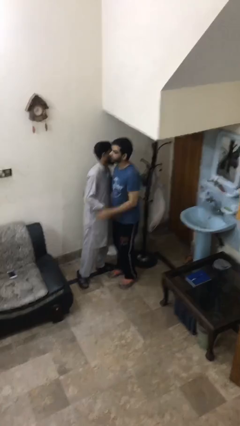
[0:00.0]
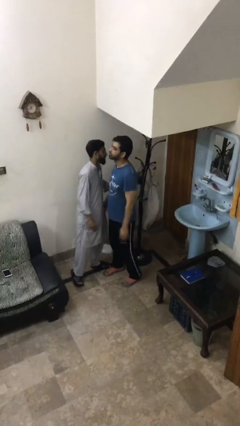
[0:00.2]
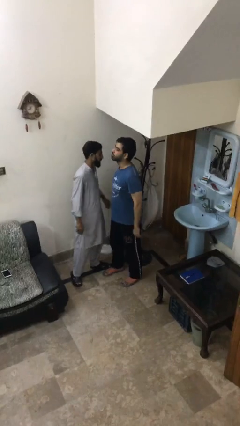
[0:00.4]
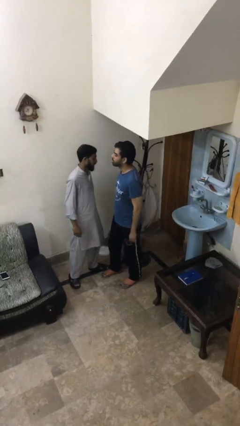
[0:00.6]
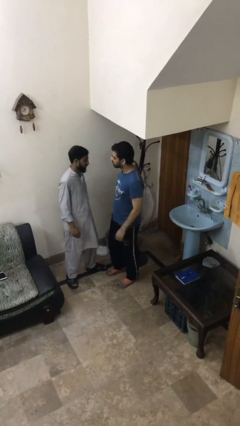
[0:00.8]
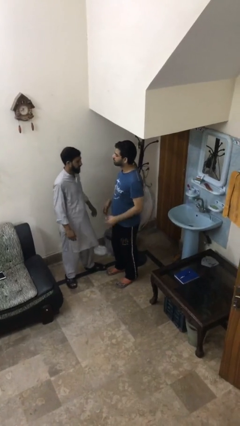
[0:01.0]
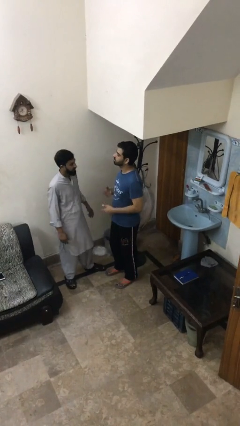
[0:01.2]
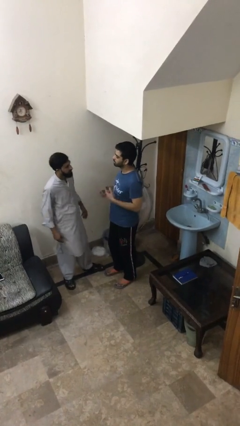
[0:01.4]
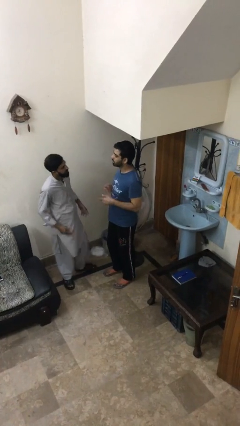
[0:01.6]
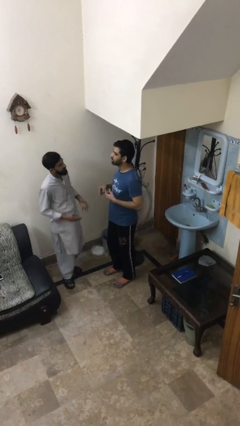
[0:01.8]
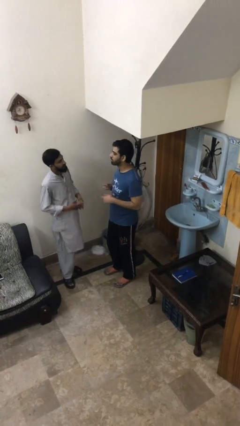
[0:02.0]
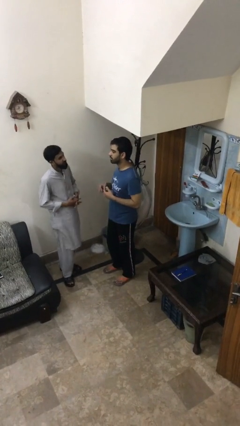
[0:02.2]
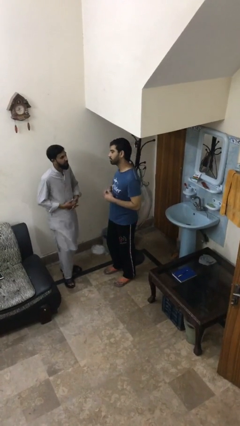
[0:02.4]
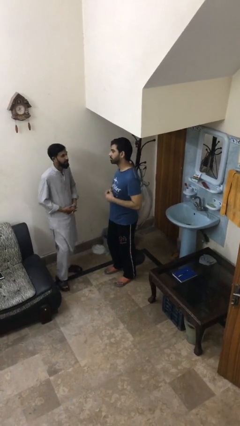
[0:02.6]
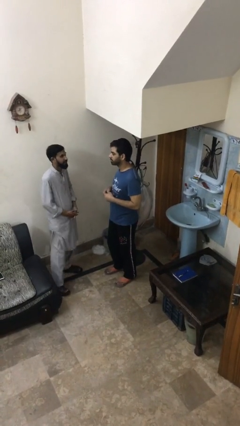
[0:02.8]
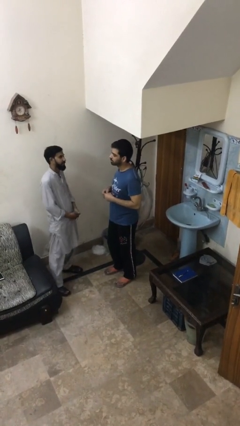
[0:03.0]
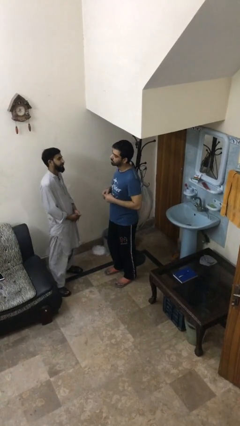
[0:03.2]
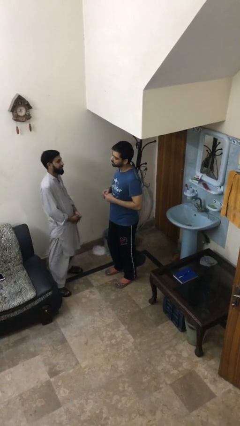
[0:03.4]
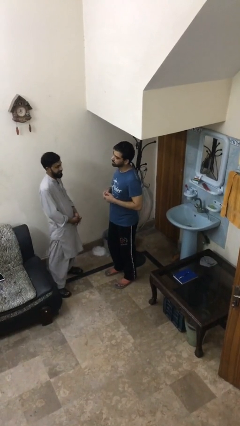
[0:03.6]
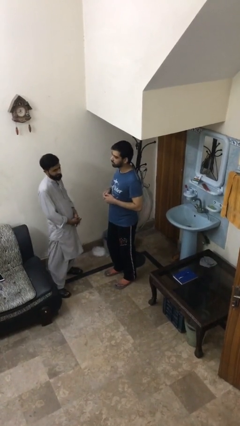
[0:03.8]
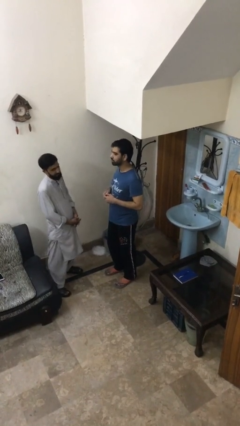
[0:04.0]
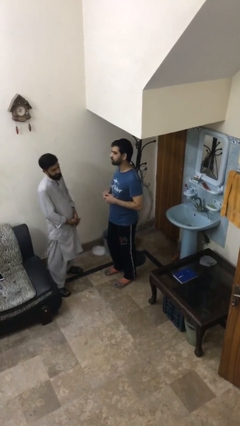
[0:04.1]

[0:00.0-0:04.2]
person talks to person

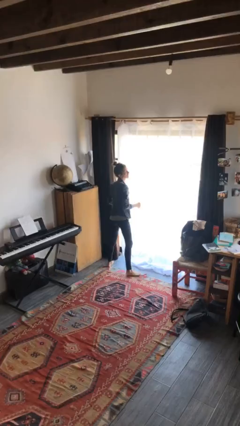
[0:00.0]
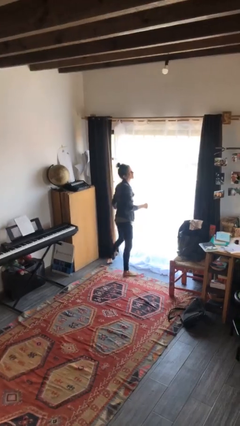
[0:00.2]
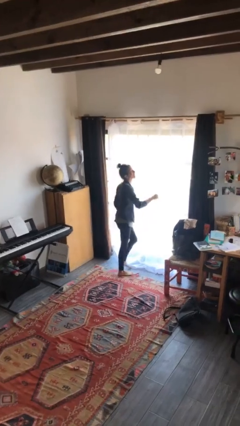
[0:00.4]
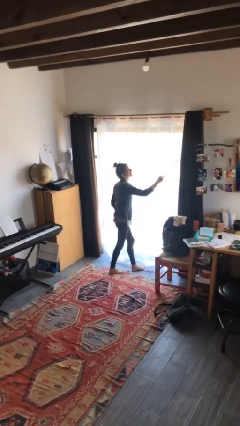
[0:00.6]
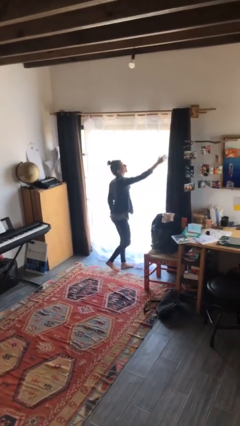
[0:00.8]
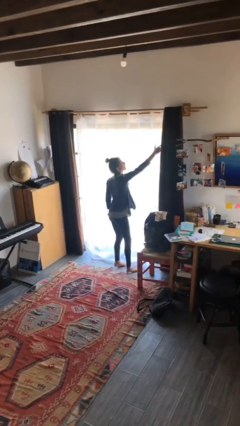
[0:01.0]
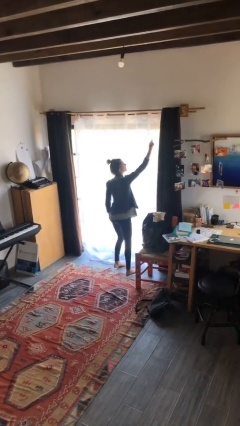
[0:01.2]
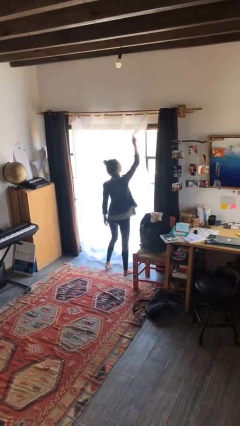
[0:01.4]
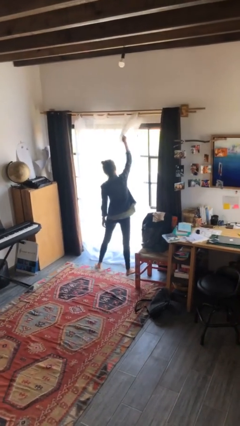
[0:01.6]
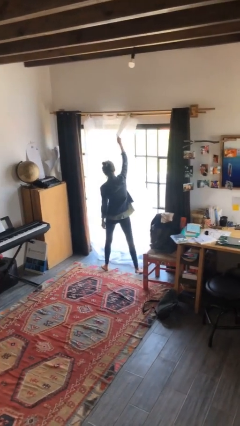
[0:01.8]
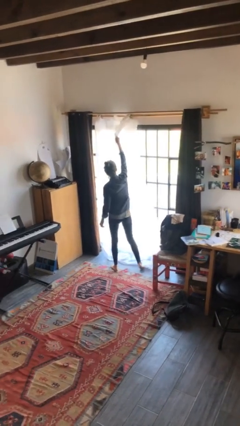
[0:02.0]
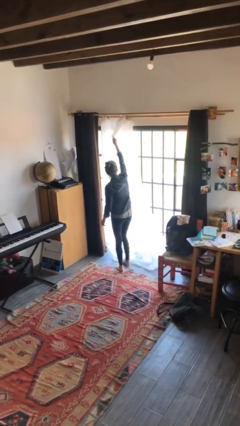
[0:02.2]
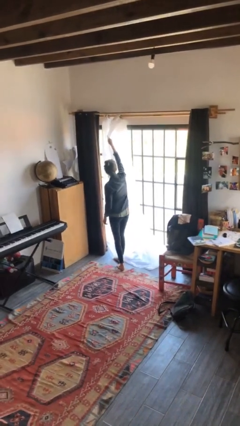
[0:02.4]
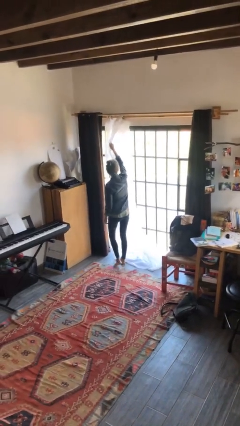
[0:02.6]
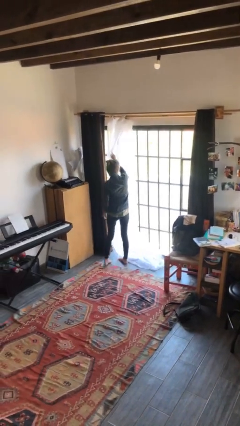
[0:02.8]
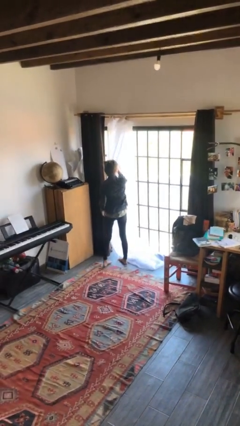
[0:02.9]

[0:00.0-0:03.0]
person opens curtains

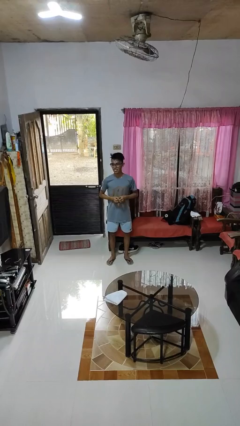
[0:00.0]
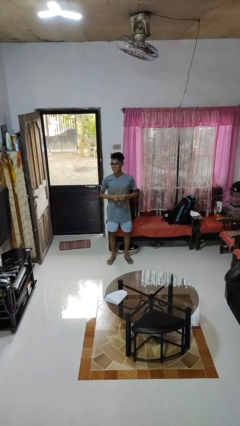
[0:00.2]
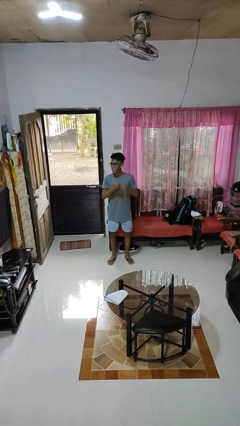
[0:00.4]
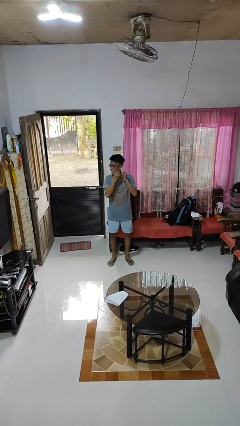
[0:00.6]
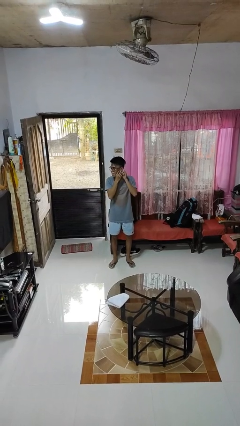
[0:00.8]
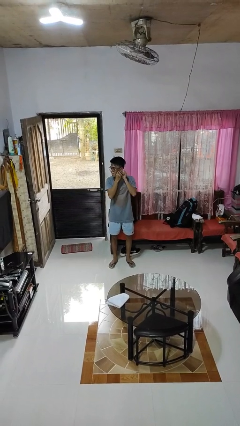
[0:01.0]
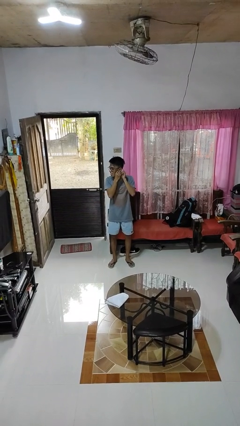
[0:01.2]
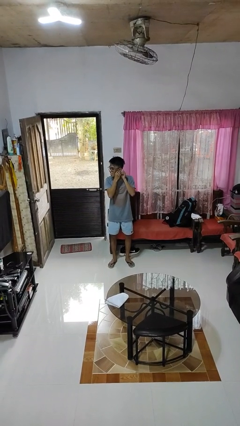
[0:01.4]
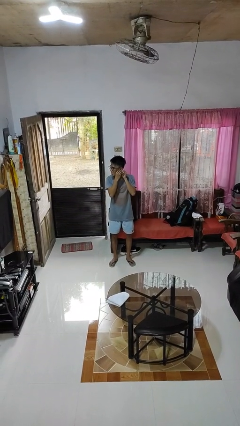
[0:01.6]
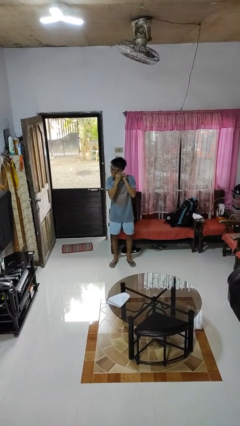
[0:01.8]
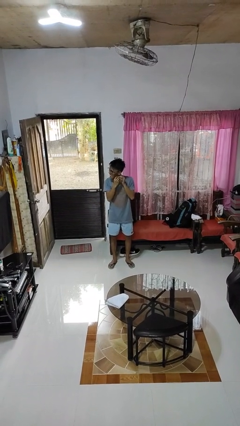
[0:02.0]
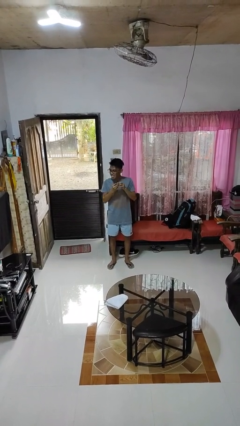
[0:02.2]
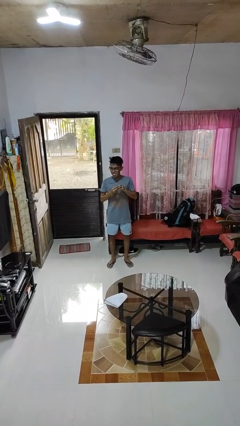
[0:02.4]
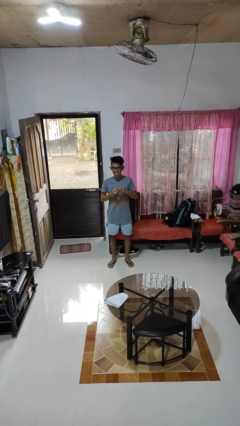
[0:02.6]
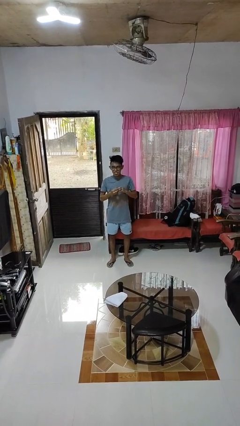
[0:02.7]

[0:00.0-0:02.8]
person takes off earrings

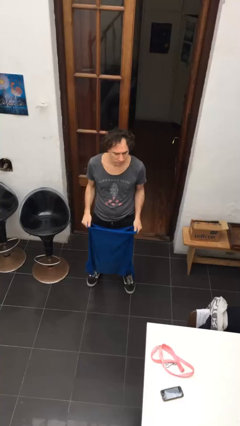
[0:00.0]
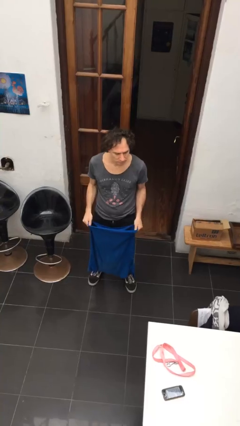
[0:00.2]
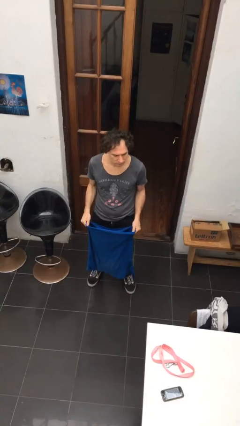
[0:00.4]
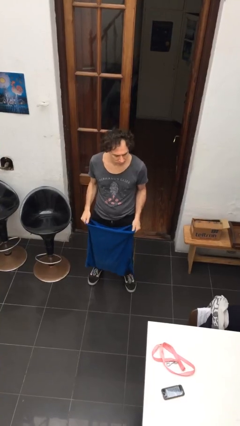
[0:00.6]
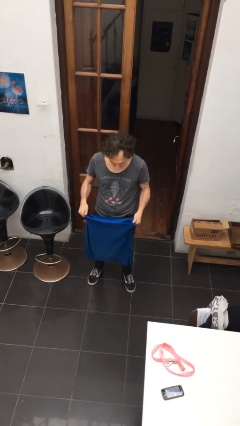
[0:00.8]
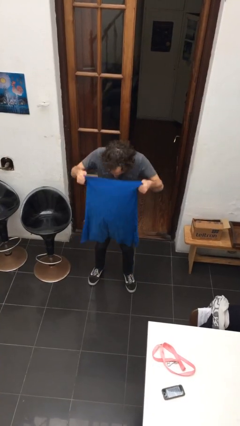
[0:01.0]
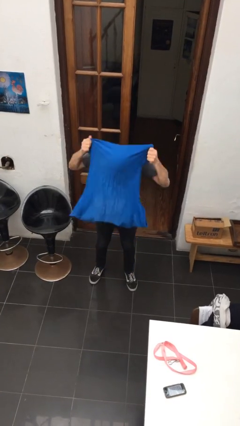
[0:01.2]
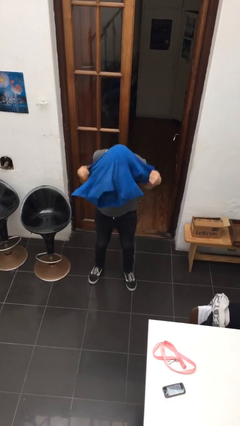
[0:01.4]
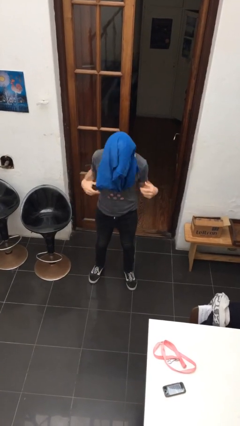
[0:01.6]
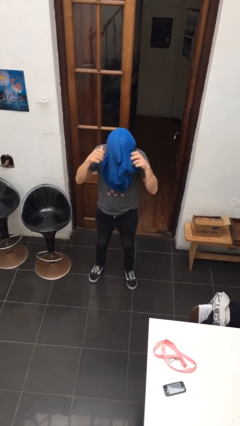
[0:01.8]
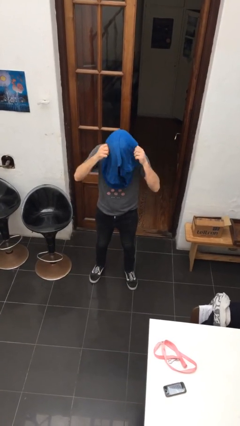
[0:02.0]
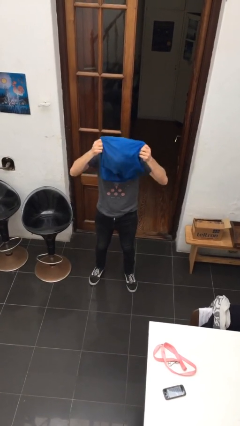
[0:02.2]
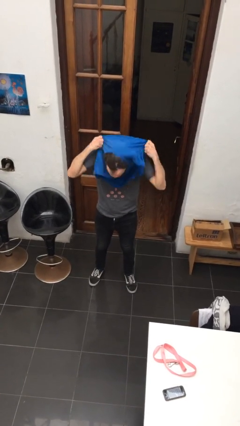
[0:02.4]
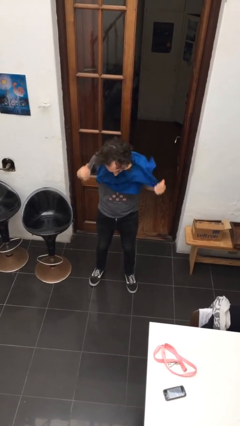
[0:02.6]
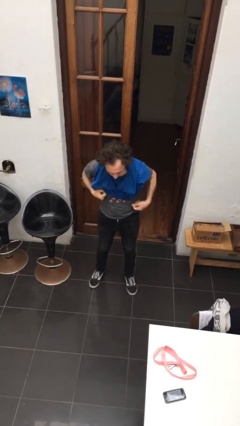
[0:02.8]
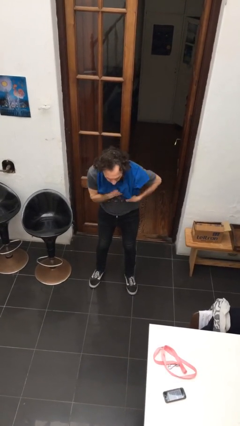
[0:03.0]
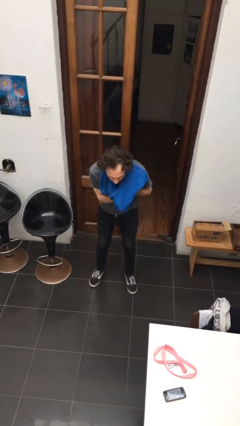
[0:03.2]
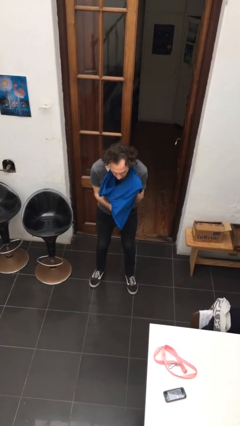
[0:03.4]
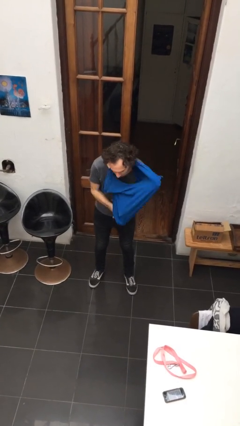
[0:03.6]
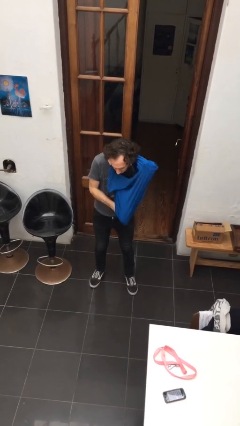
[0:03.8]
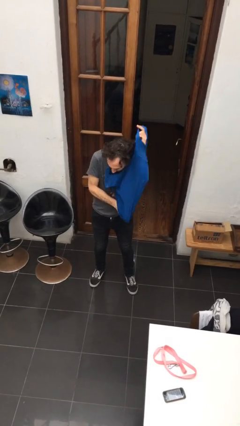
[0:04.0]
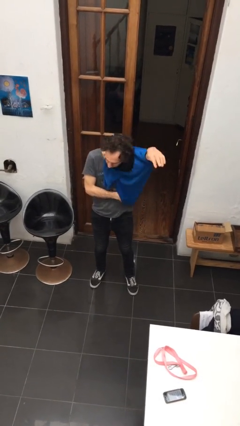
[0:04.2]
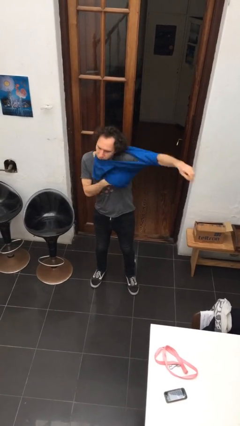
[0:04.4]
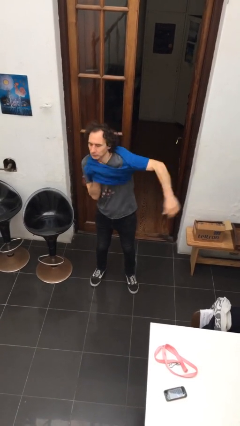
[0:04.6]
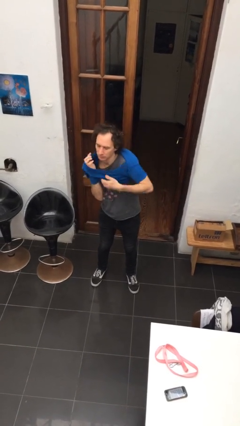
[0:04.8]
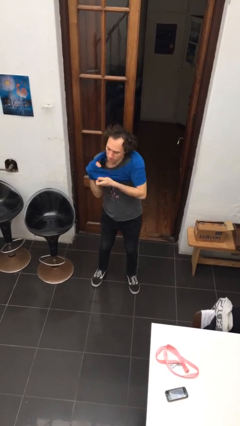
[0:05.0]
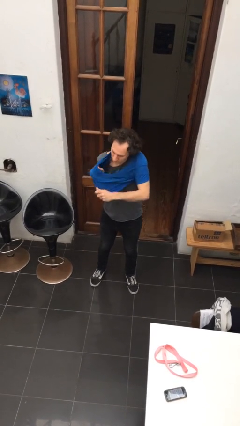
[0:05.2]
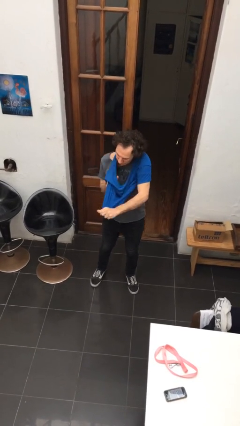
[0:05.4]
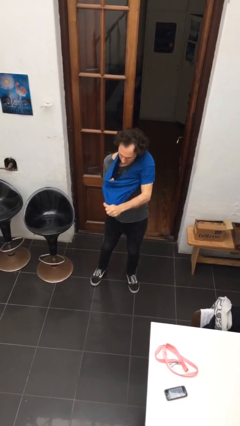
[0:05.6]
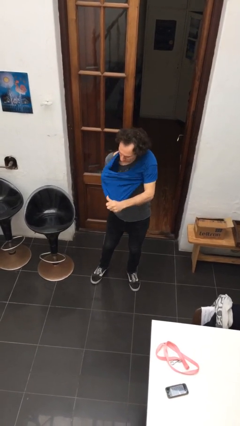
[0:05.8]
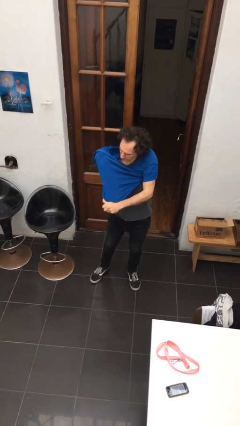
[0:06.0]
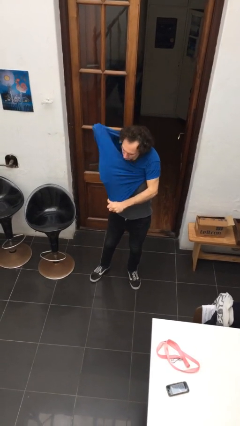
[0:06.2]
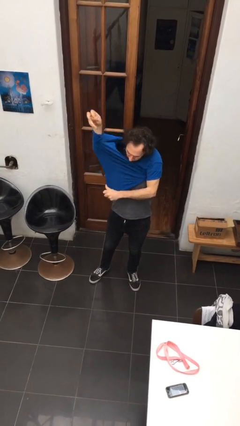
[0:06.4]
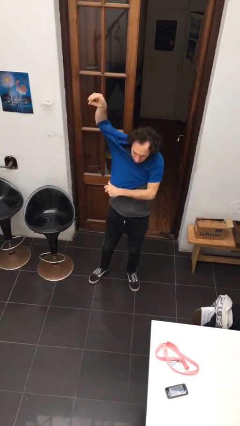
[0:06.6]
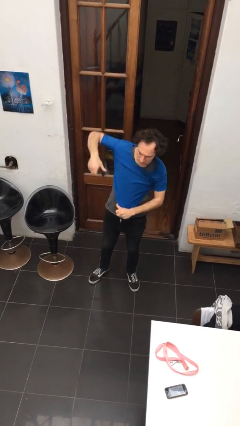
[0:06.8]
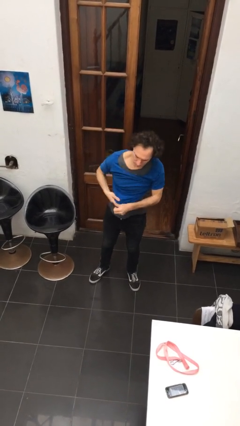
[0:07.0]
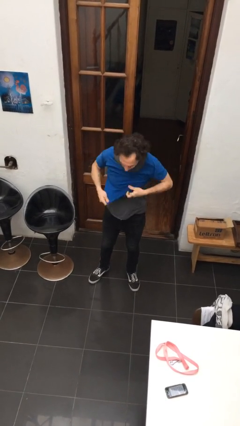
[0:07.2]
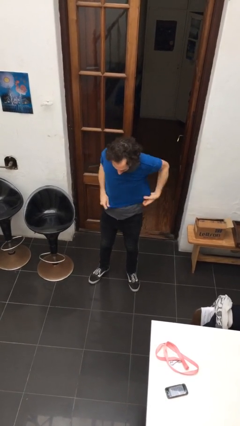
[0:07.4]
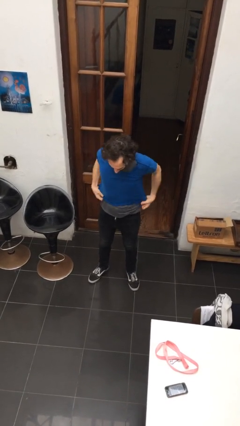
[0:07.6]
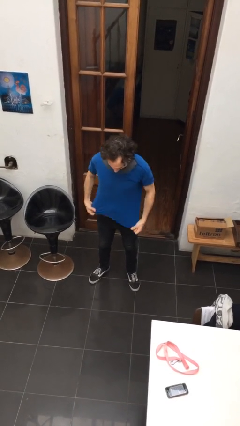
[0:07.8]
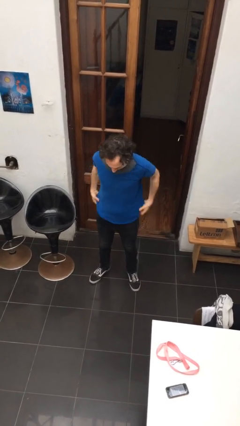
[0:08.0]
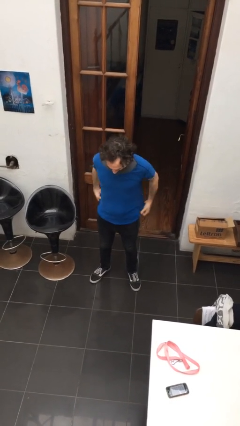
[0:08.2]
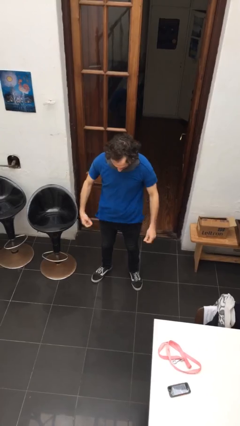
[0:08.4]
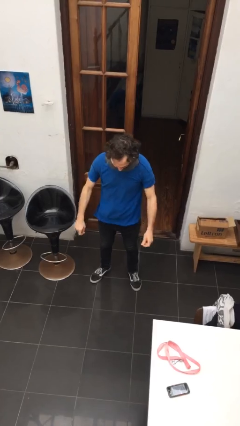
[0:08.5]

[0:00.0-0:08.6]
person puts on shirt
